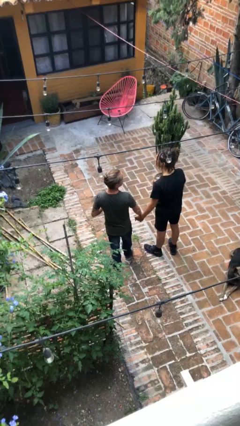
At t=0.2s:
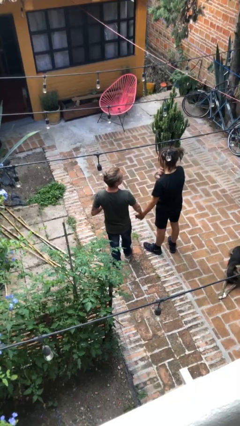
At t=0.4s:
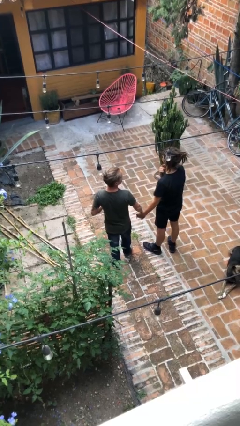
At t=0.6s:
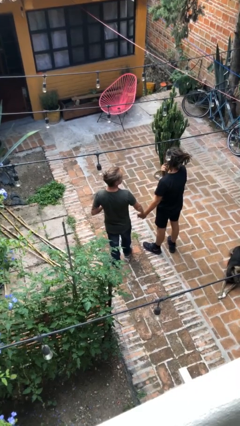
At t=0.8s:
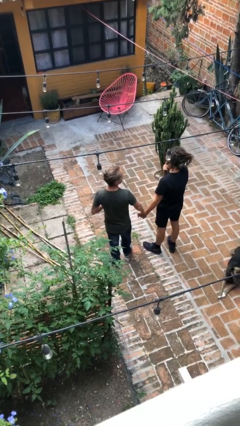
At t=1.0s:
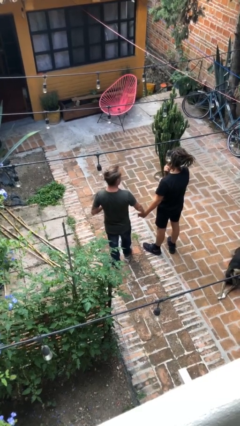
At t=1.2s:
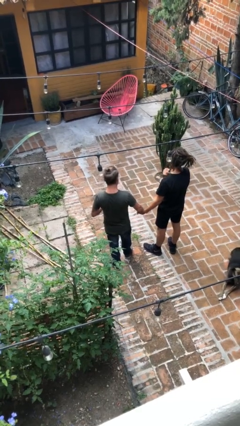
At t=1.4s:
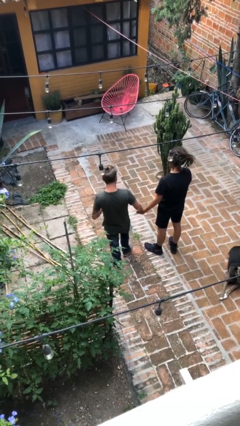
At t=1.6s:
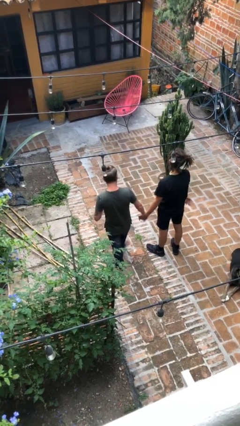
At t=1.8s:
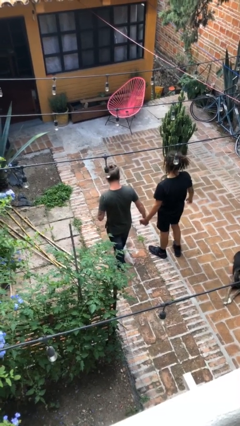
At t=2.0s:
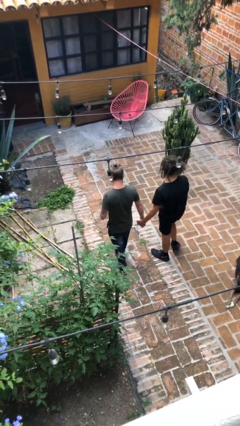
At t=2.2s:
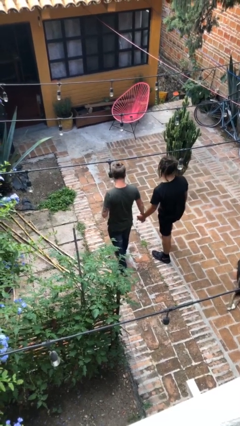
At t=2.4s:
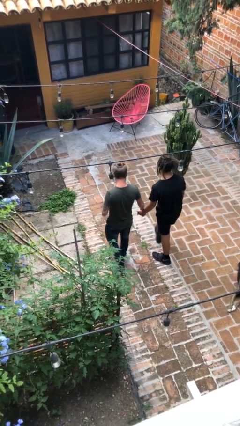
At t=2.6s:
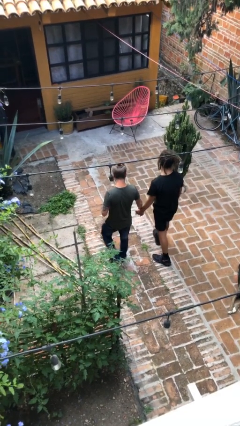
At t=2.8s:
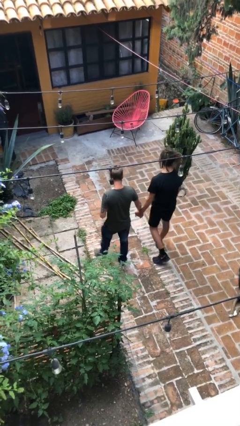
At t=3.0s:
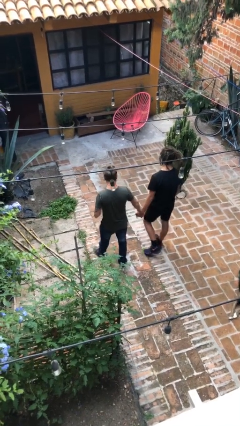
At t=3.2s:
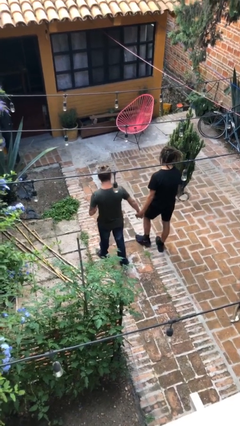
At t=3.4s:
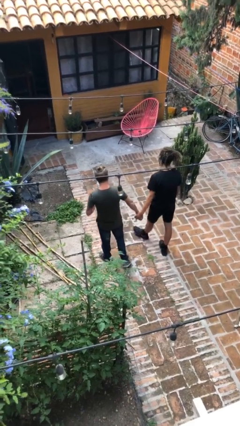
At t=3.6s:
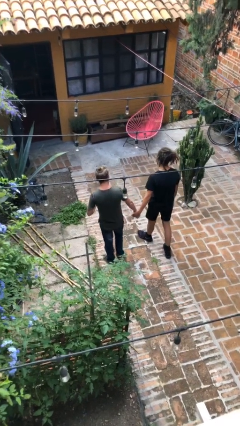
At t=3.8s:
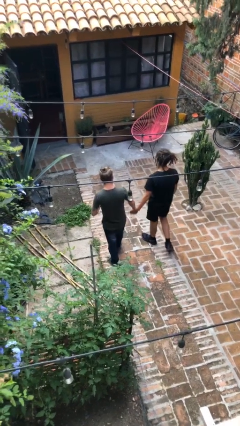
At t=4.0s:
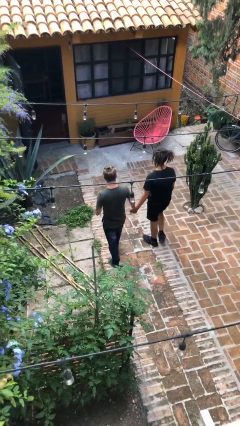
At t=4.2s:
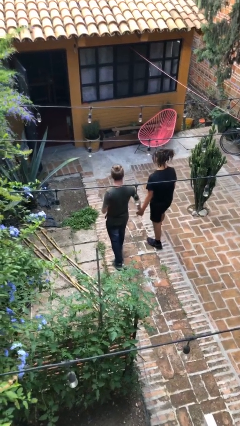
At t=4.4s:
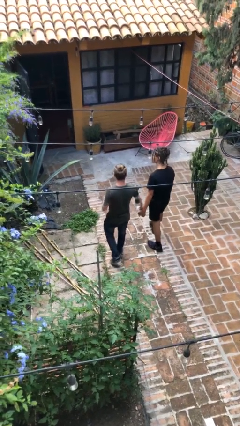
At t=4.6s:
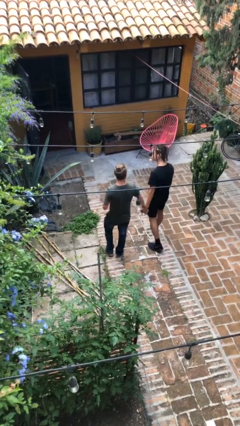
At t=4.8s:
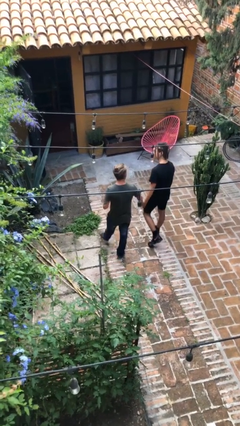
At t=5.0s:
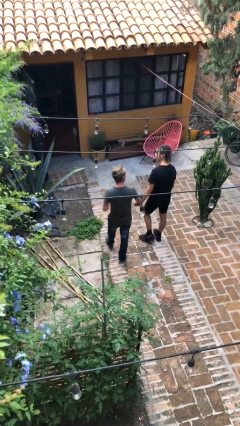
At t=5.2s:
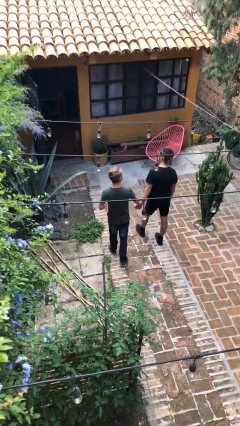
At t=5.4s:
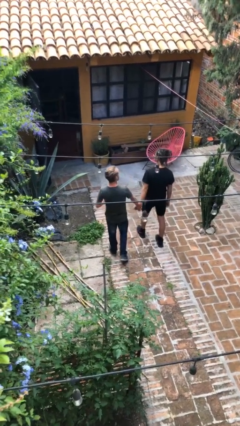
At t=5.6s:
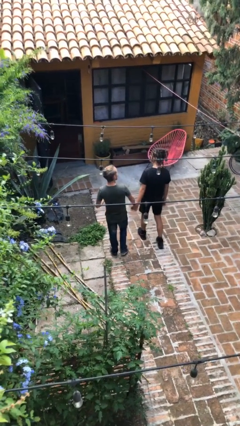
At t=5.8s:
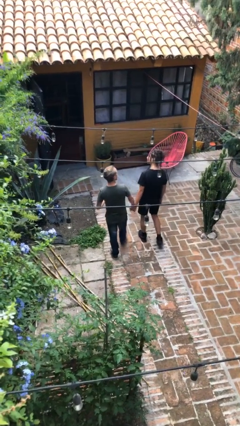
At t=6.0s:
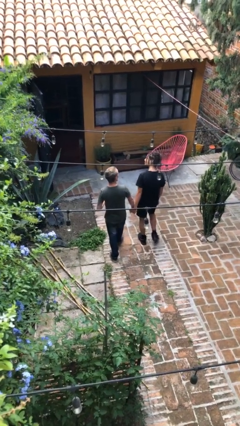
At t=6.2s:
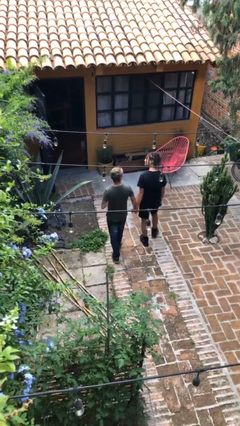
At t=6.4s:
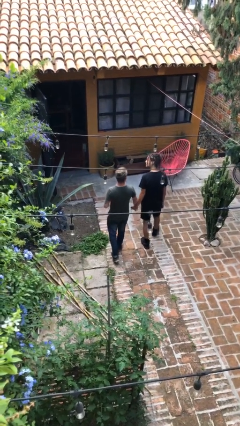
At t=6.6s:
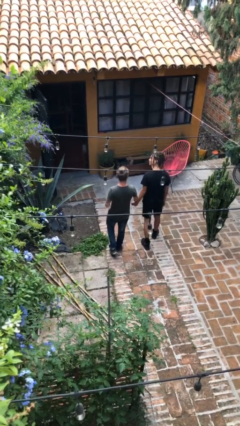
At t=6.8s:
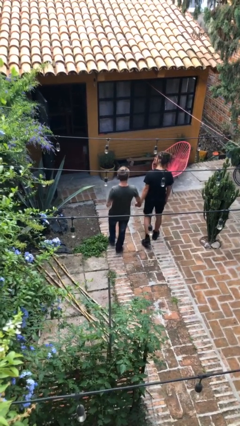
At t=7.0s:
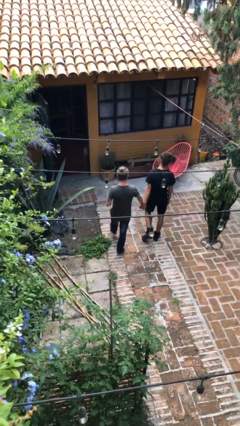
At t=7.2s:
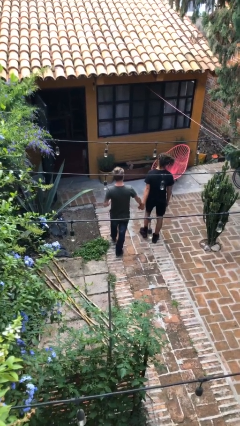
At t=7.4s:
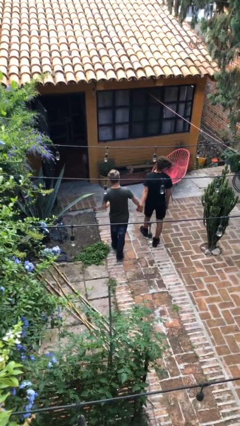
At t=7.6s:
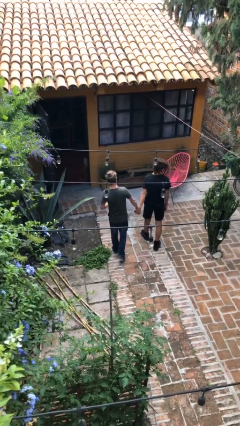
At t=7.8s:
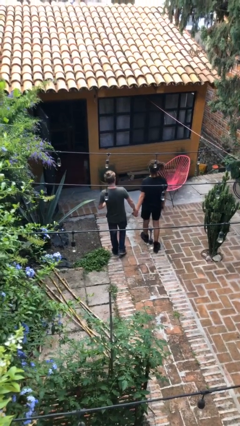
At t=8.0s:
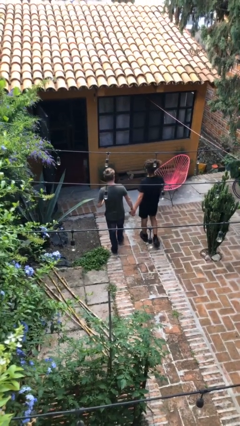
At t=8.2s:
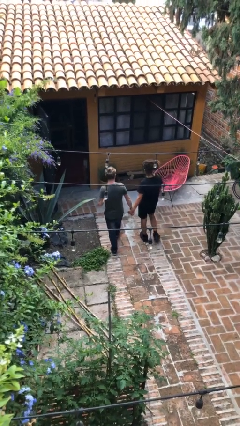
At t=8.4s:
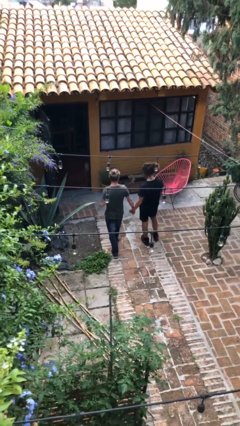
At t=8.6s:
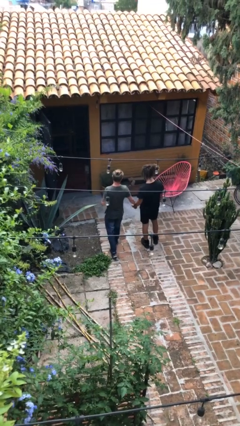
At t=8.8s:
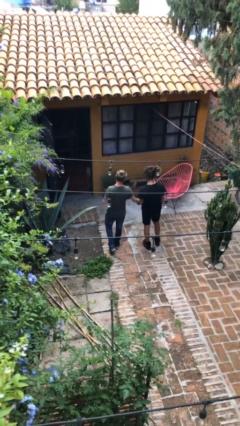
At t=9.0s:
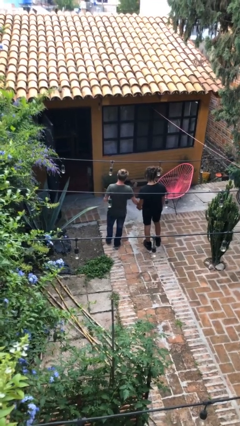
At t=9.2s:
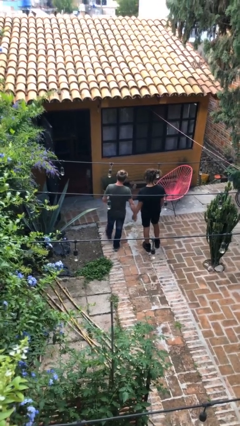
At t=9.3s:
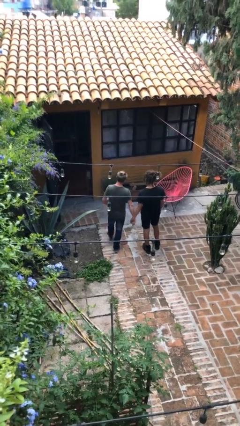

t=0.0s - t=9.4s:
person holds hand

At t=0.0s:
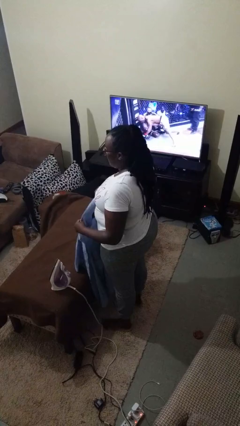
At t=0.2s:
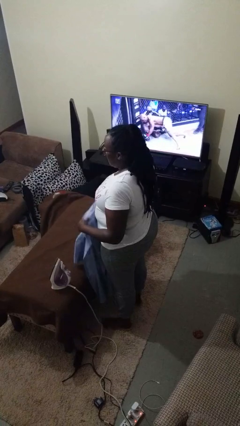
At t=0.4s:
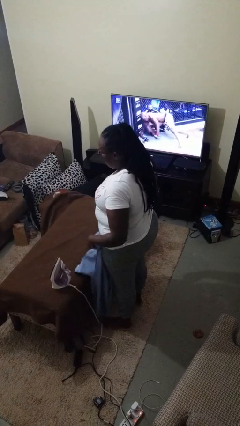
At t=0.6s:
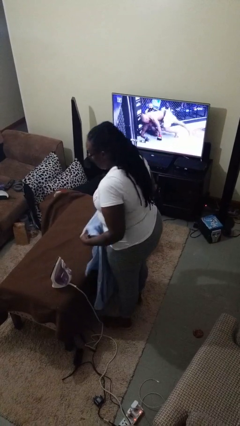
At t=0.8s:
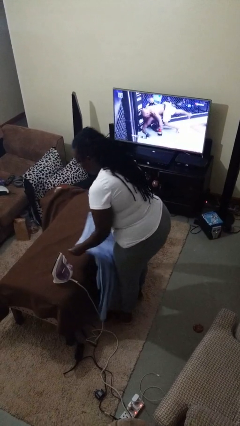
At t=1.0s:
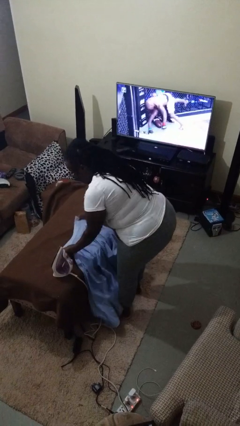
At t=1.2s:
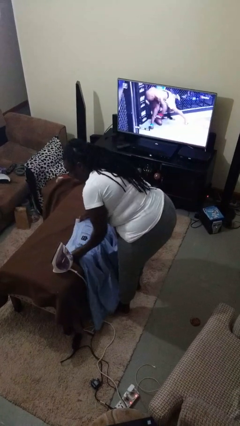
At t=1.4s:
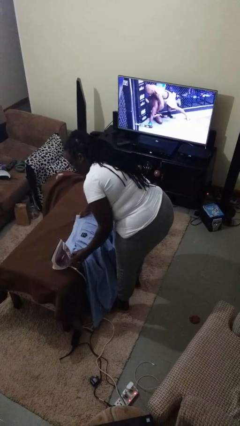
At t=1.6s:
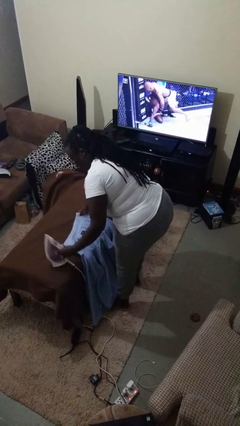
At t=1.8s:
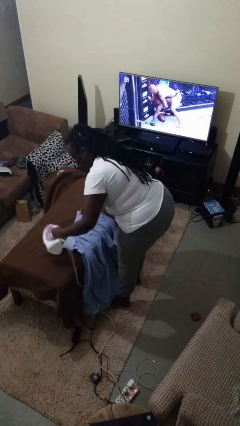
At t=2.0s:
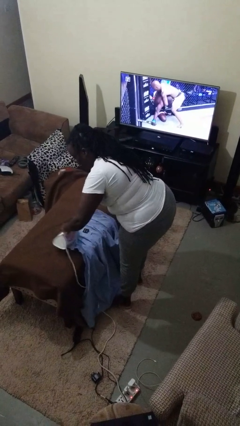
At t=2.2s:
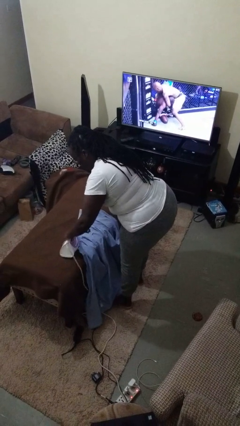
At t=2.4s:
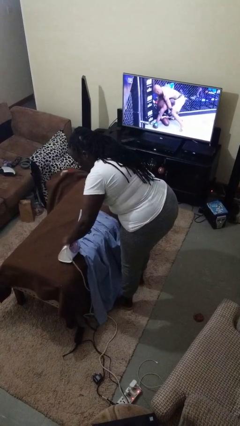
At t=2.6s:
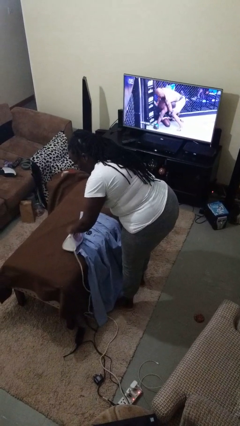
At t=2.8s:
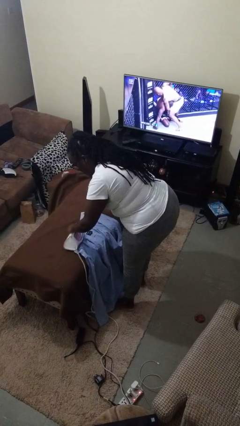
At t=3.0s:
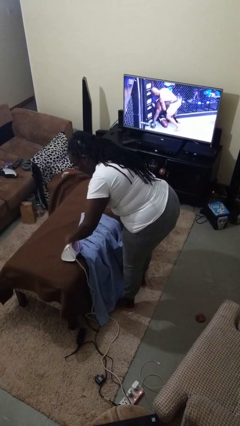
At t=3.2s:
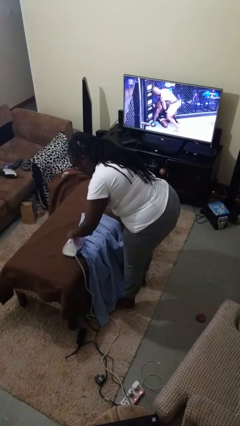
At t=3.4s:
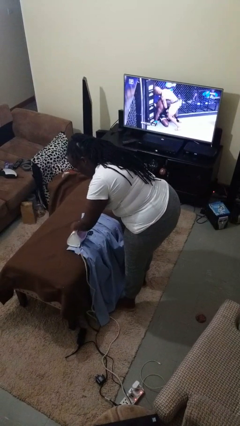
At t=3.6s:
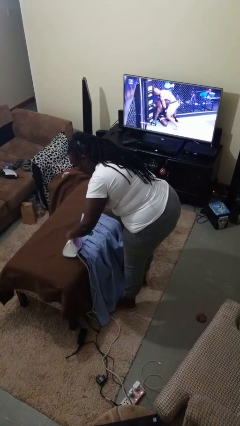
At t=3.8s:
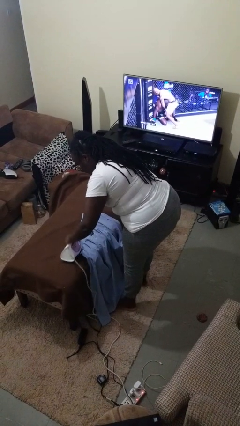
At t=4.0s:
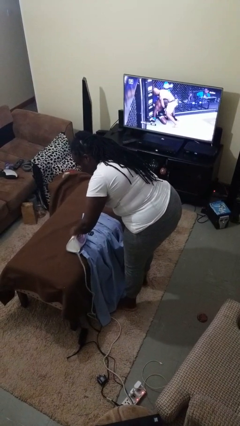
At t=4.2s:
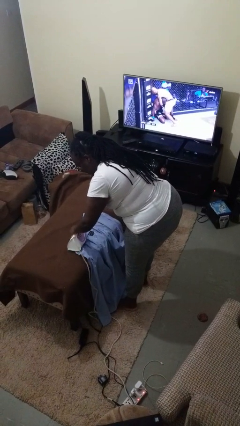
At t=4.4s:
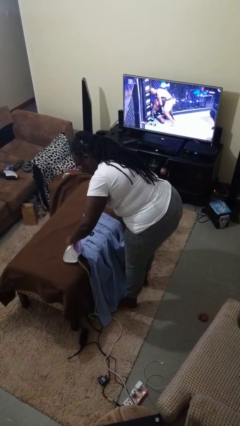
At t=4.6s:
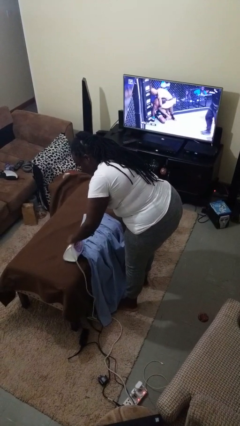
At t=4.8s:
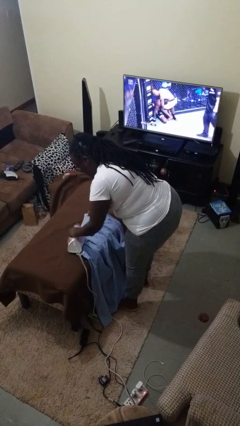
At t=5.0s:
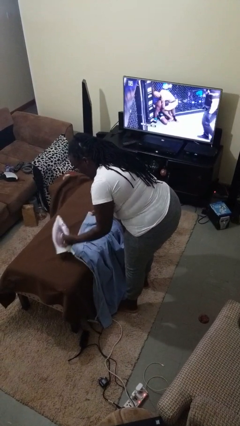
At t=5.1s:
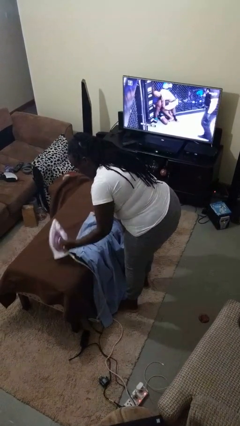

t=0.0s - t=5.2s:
person irons clothes

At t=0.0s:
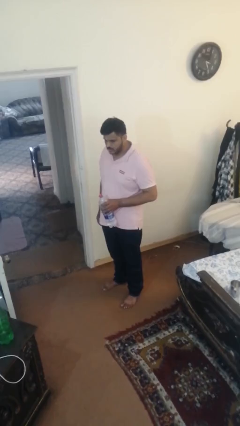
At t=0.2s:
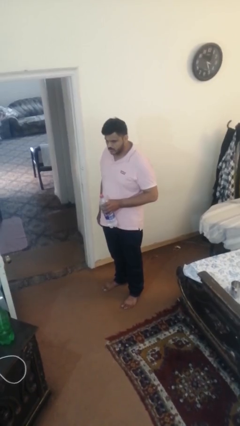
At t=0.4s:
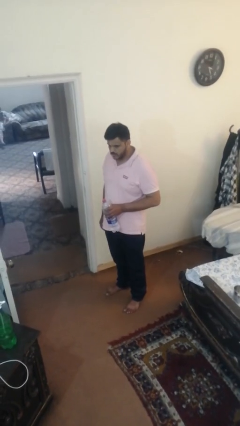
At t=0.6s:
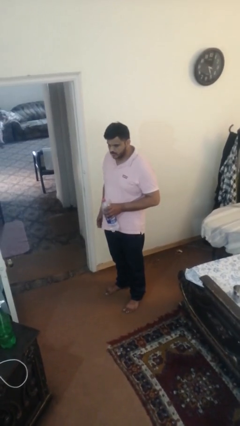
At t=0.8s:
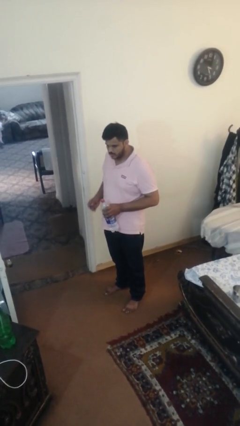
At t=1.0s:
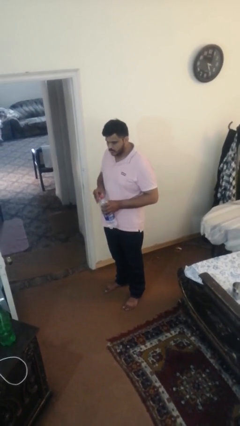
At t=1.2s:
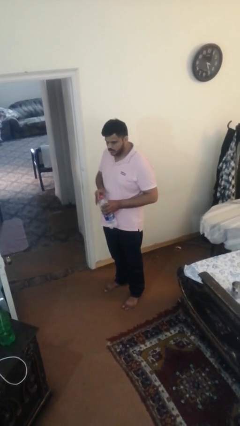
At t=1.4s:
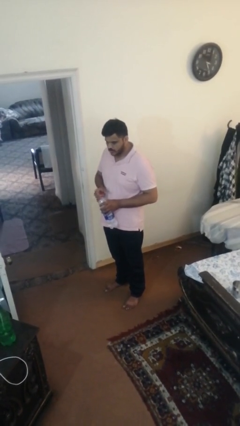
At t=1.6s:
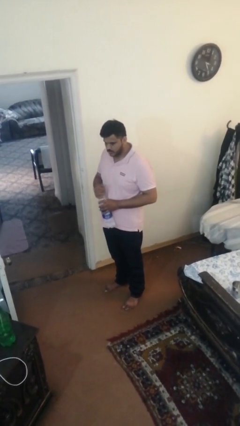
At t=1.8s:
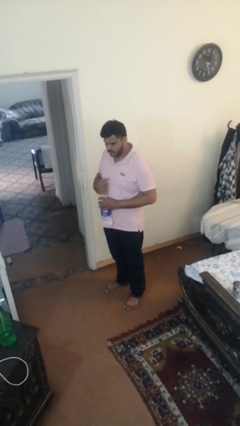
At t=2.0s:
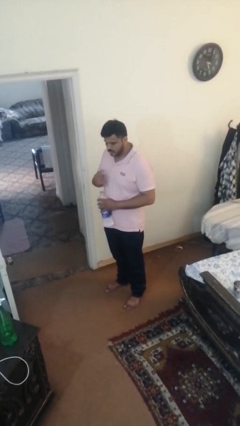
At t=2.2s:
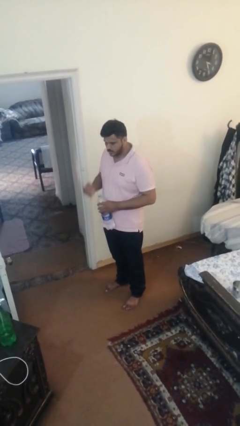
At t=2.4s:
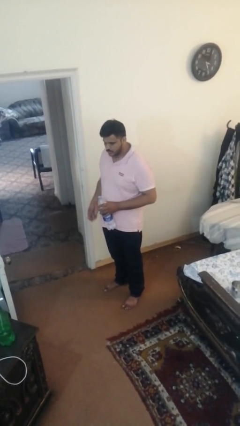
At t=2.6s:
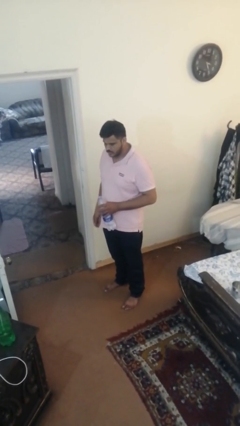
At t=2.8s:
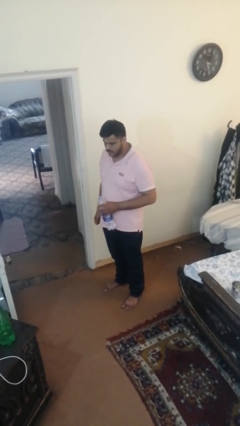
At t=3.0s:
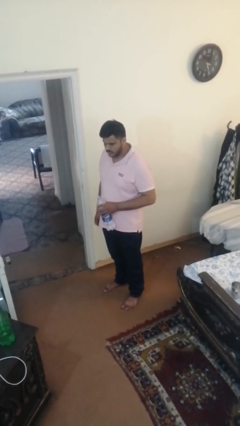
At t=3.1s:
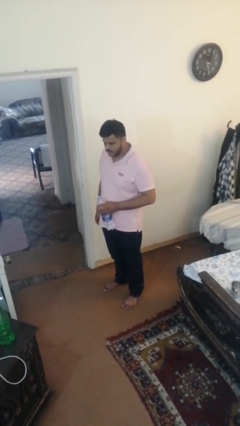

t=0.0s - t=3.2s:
person unscrews lid from bottle
